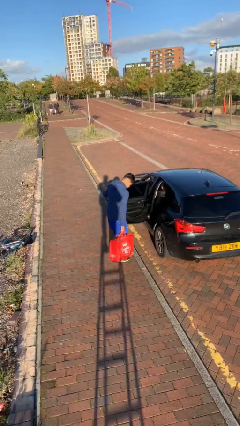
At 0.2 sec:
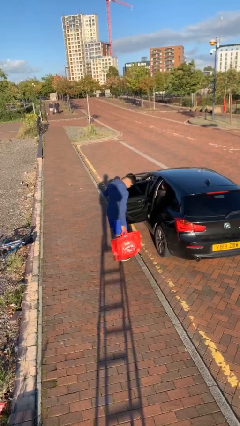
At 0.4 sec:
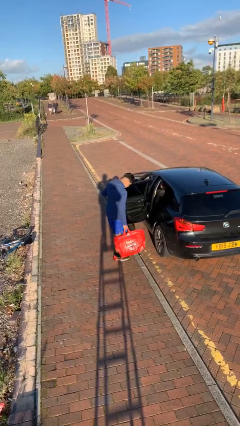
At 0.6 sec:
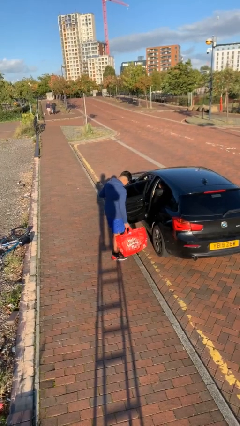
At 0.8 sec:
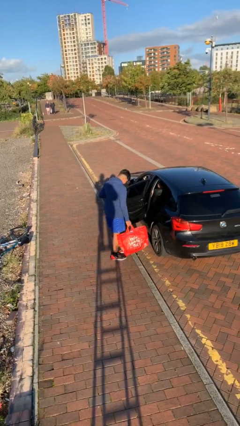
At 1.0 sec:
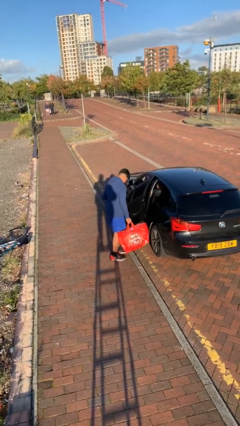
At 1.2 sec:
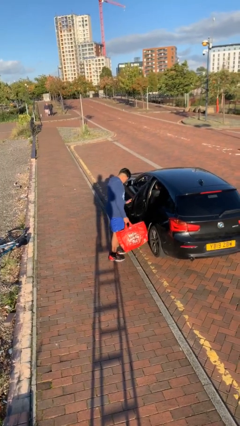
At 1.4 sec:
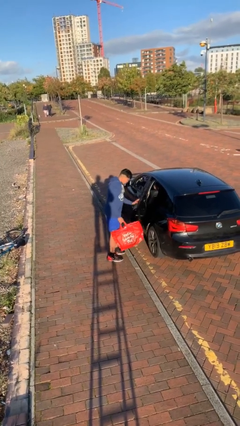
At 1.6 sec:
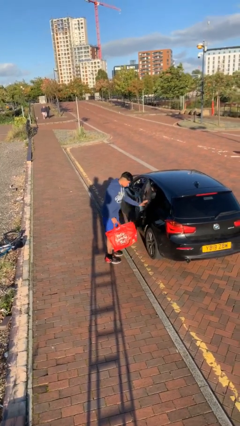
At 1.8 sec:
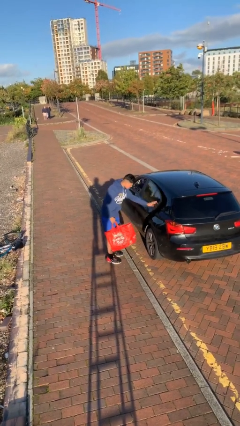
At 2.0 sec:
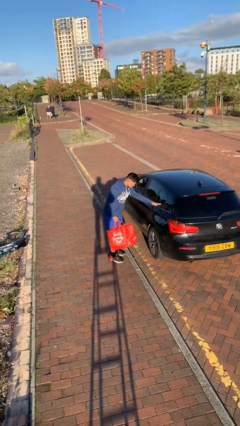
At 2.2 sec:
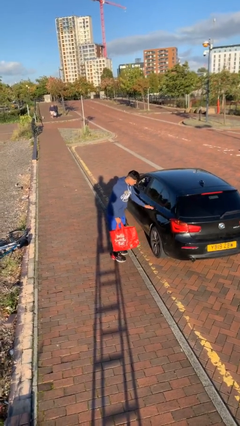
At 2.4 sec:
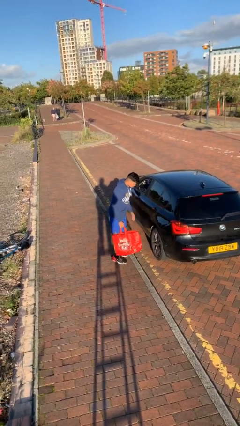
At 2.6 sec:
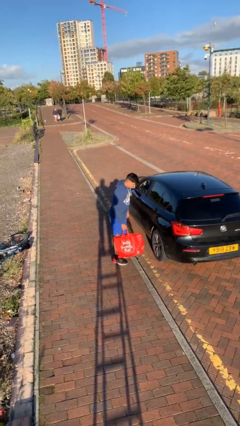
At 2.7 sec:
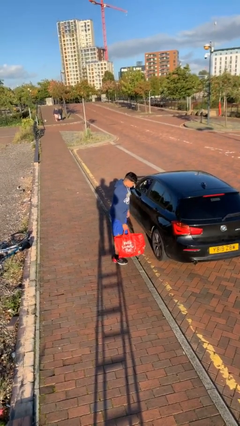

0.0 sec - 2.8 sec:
person closes car door

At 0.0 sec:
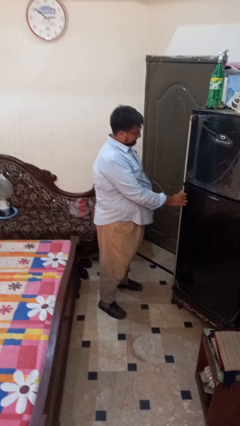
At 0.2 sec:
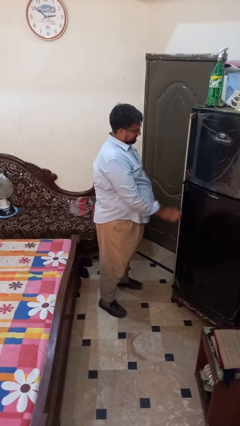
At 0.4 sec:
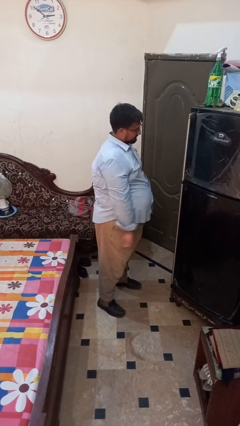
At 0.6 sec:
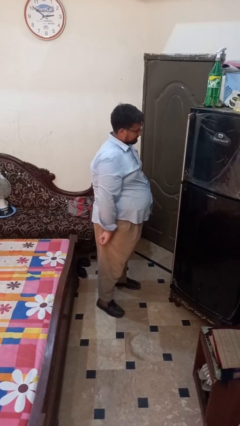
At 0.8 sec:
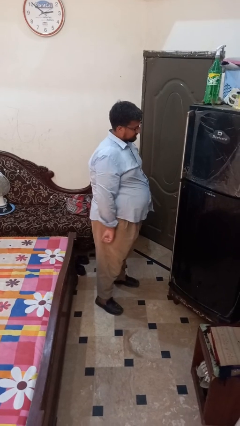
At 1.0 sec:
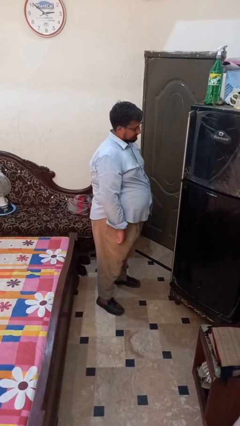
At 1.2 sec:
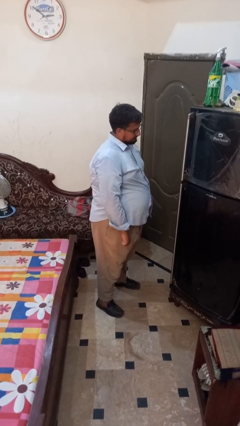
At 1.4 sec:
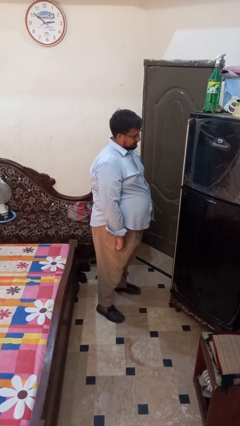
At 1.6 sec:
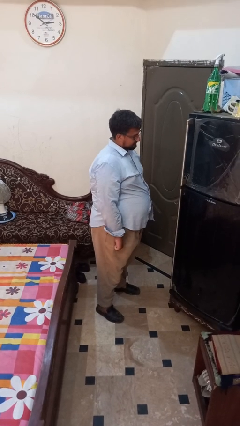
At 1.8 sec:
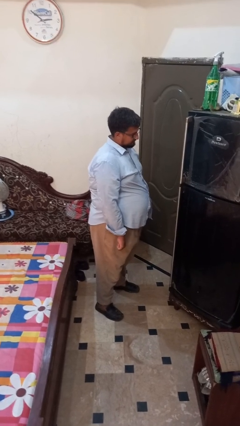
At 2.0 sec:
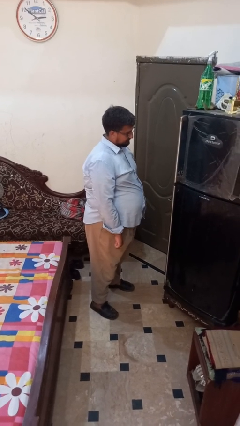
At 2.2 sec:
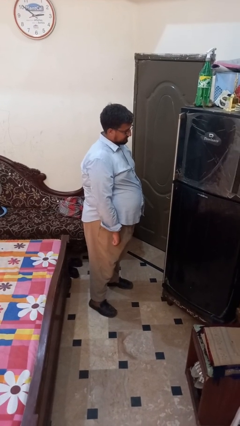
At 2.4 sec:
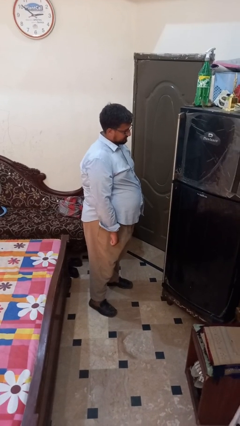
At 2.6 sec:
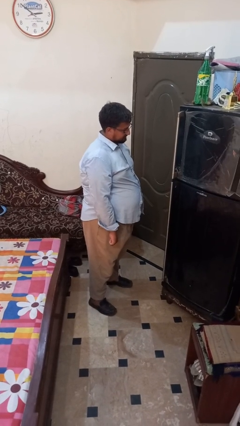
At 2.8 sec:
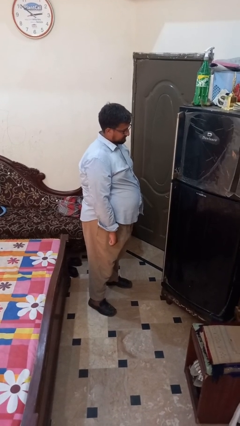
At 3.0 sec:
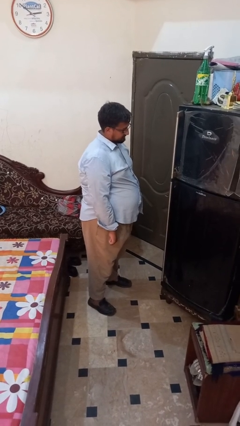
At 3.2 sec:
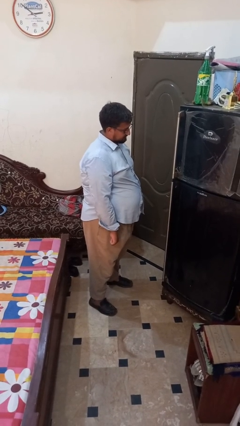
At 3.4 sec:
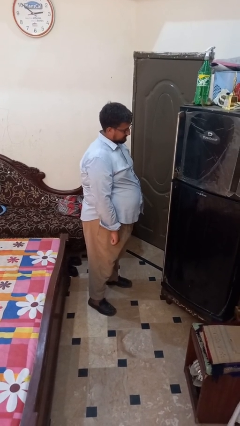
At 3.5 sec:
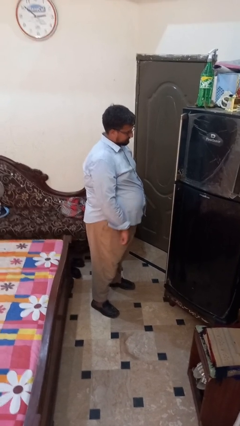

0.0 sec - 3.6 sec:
person closes refrigerator

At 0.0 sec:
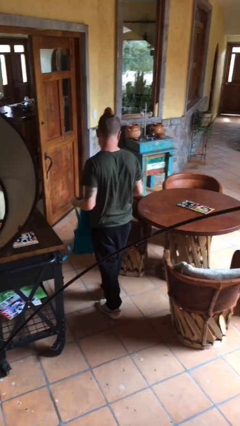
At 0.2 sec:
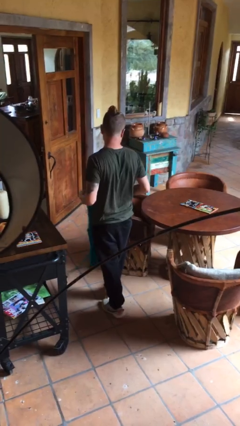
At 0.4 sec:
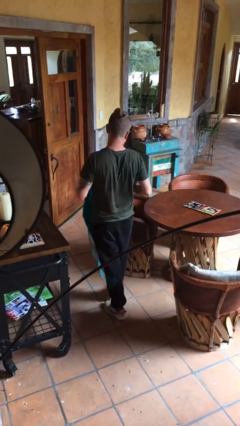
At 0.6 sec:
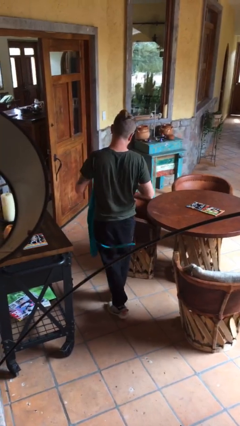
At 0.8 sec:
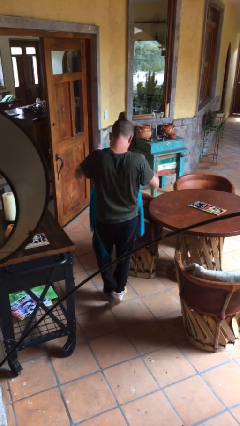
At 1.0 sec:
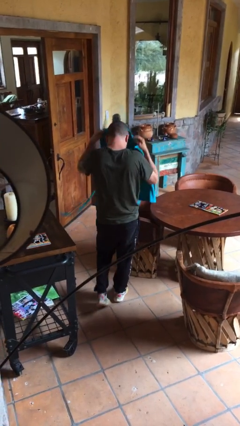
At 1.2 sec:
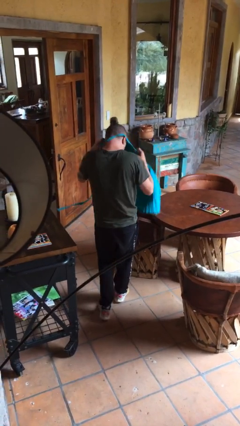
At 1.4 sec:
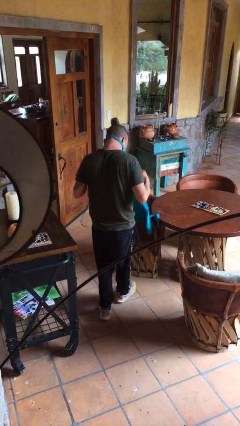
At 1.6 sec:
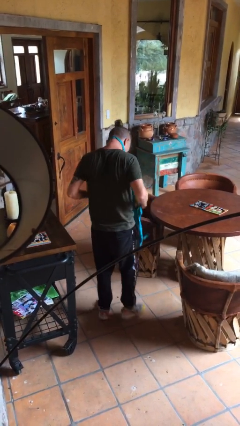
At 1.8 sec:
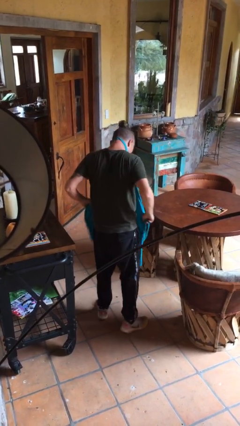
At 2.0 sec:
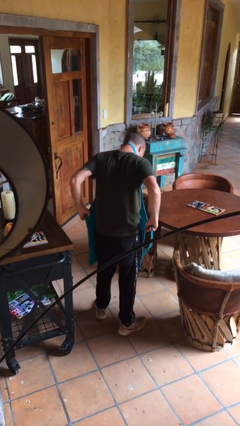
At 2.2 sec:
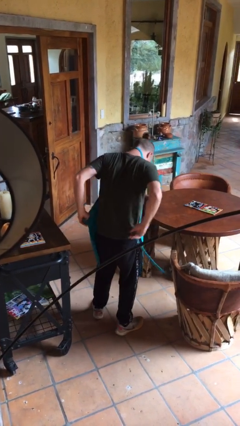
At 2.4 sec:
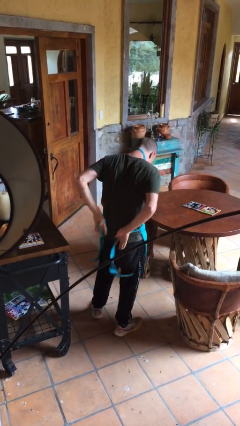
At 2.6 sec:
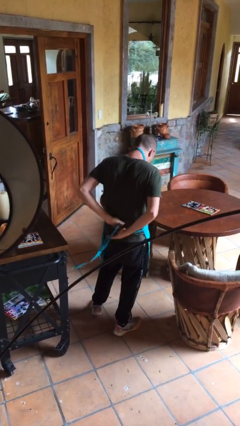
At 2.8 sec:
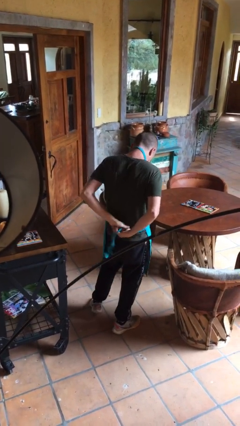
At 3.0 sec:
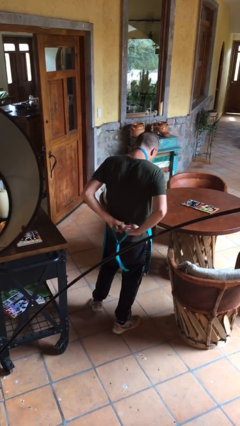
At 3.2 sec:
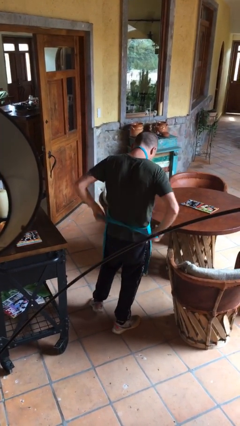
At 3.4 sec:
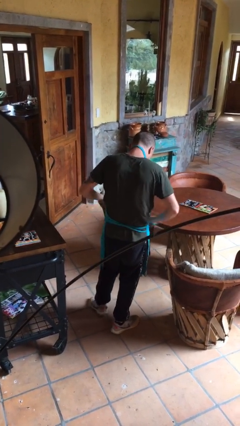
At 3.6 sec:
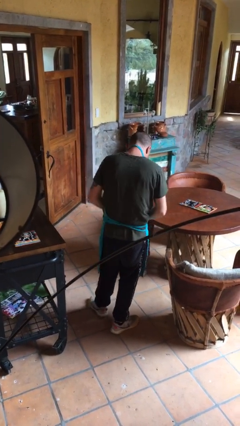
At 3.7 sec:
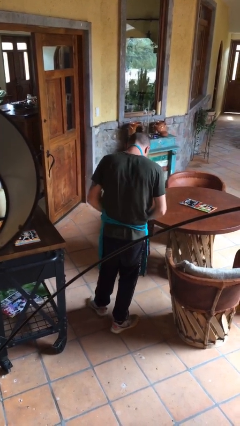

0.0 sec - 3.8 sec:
person puts on apron

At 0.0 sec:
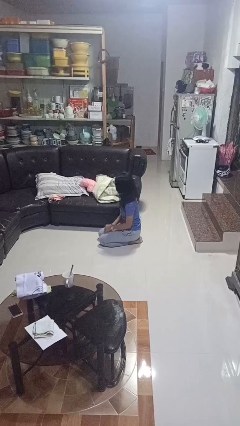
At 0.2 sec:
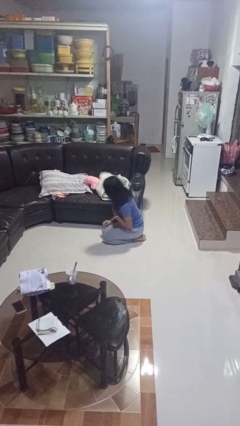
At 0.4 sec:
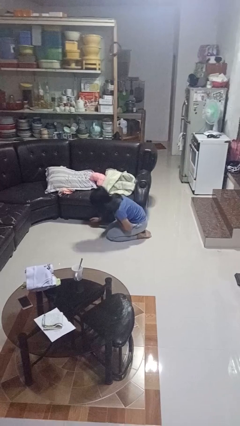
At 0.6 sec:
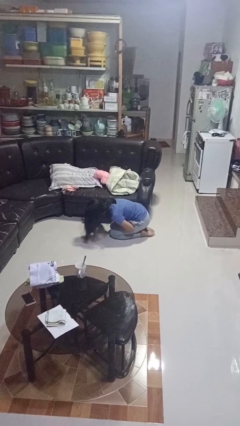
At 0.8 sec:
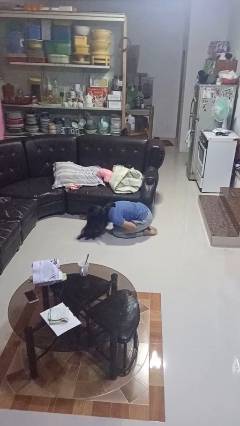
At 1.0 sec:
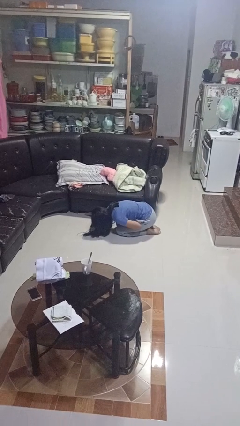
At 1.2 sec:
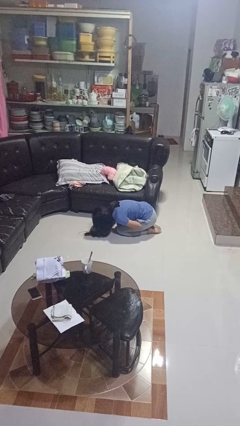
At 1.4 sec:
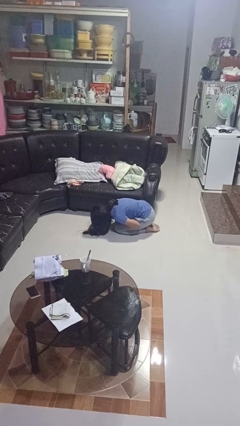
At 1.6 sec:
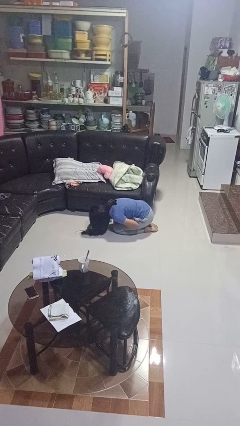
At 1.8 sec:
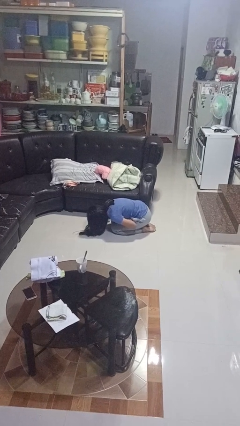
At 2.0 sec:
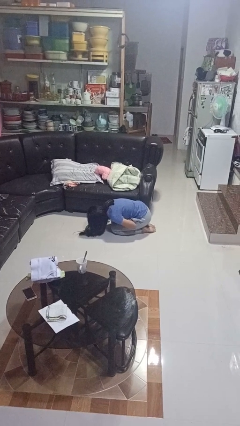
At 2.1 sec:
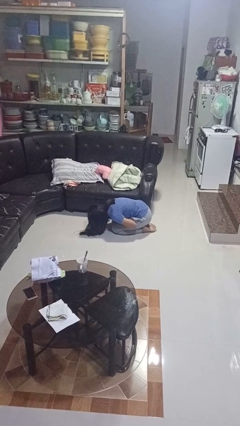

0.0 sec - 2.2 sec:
person searches under couch

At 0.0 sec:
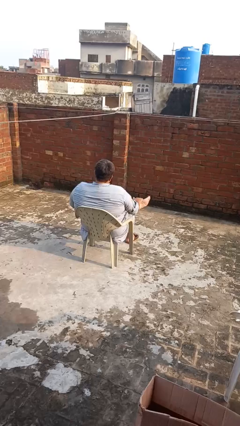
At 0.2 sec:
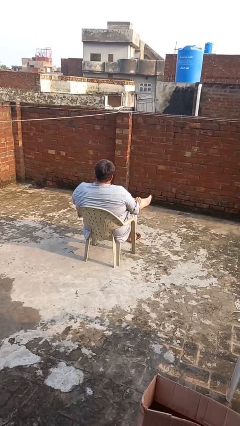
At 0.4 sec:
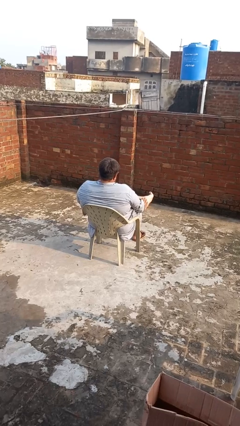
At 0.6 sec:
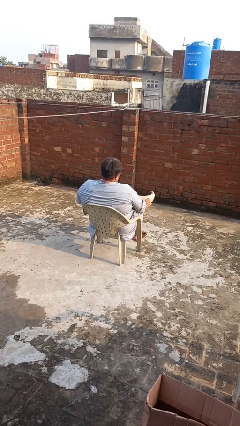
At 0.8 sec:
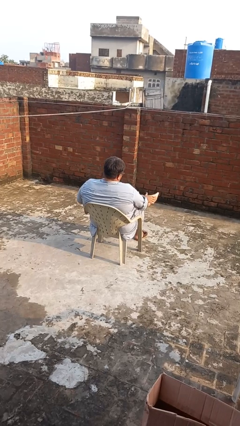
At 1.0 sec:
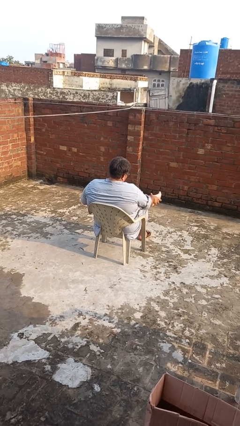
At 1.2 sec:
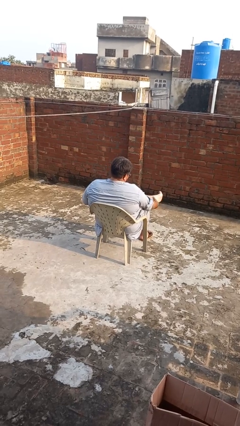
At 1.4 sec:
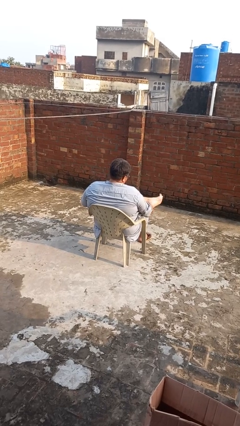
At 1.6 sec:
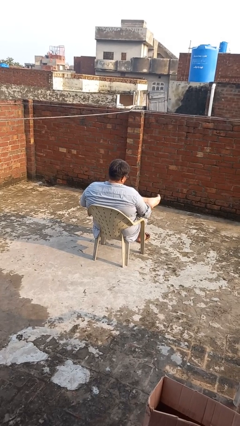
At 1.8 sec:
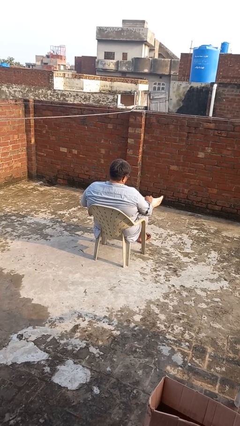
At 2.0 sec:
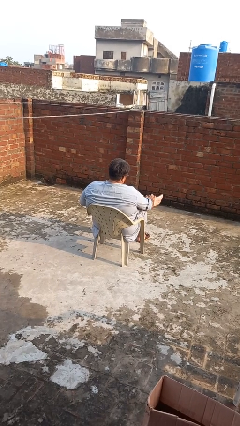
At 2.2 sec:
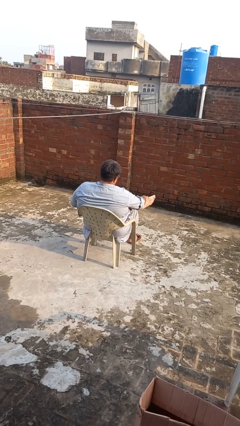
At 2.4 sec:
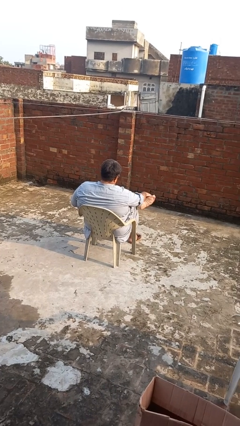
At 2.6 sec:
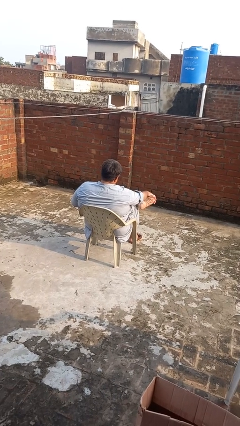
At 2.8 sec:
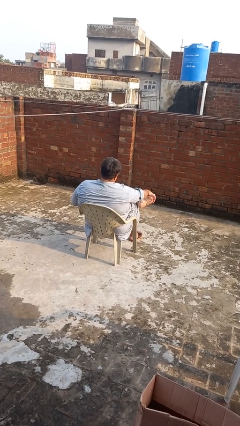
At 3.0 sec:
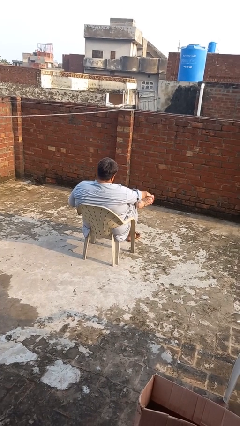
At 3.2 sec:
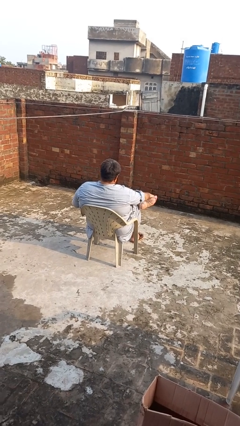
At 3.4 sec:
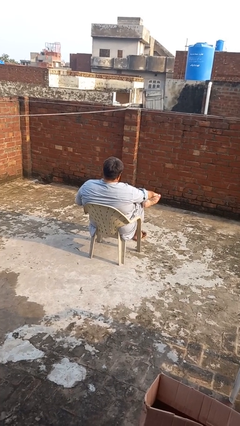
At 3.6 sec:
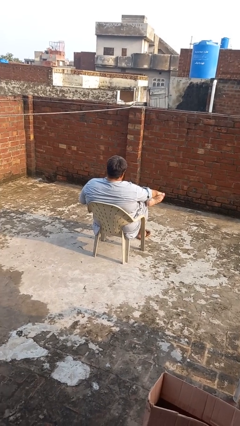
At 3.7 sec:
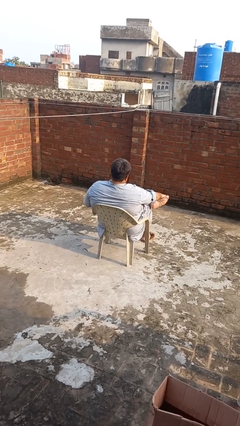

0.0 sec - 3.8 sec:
person rubs foot

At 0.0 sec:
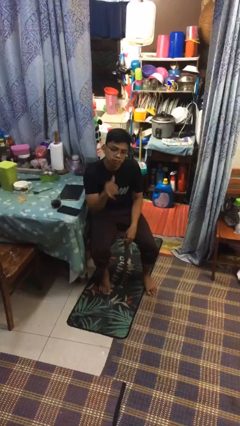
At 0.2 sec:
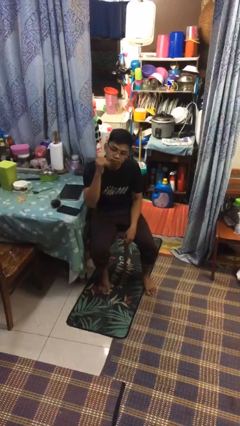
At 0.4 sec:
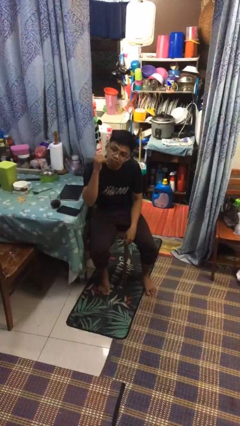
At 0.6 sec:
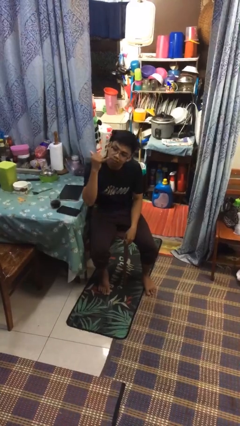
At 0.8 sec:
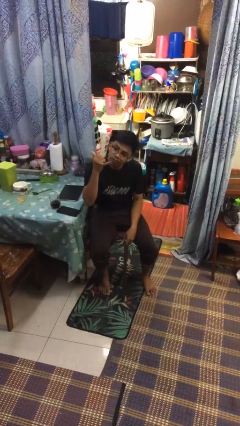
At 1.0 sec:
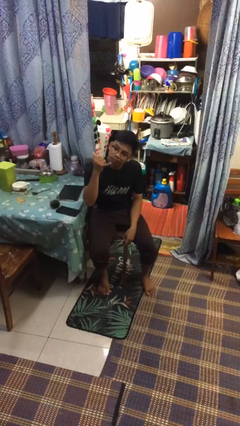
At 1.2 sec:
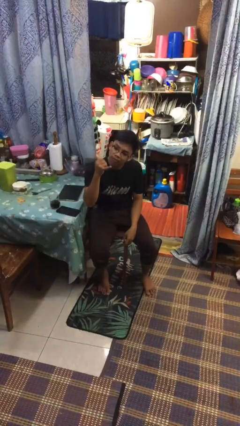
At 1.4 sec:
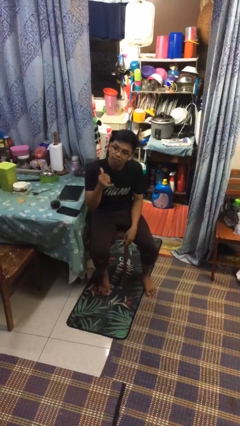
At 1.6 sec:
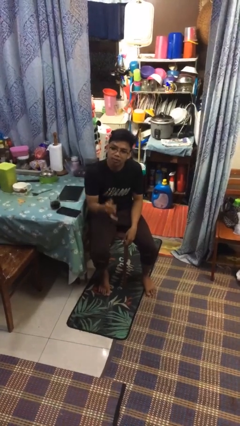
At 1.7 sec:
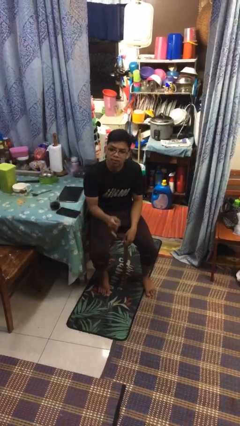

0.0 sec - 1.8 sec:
person gestures hang loose
